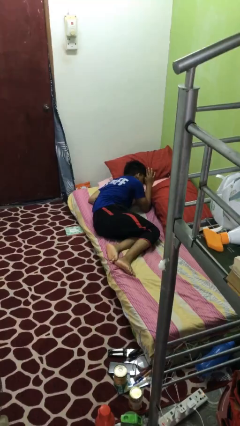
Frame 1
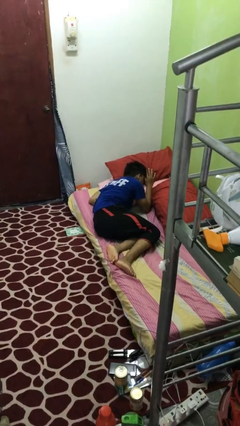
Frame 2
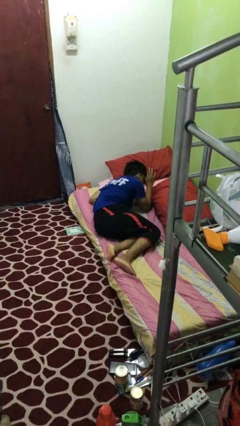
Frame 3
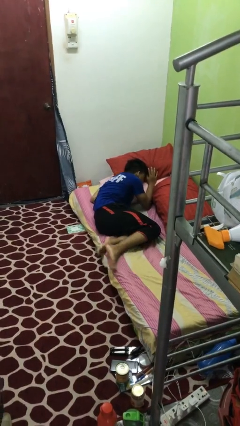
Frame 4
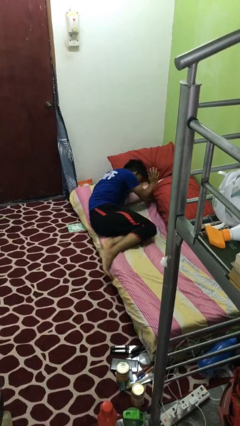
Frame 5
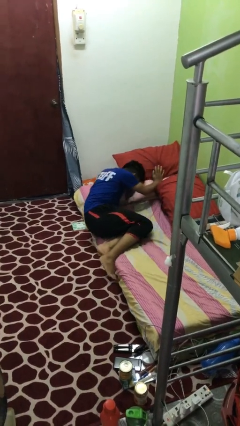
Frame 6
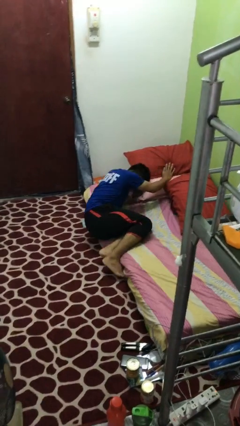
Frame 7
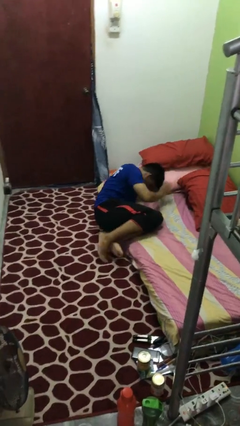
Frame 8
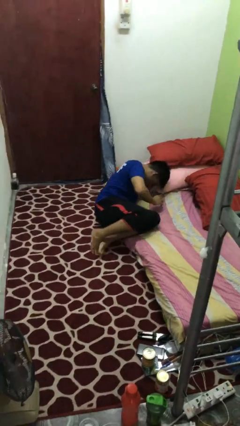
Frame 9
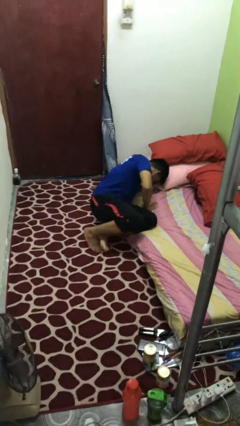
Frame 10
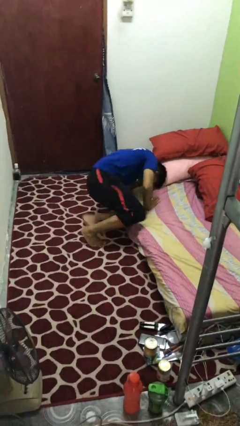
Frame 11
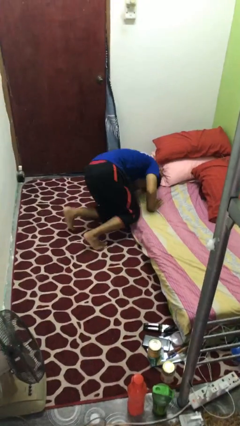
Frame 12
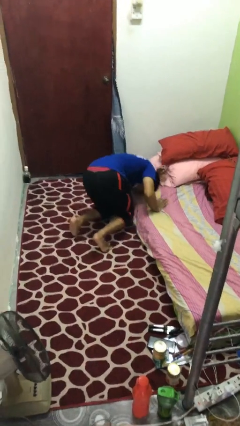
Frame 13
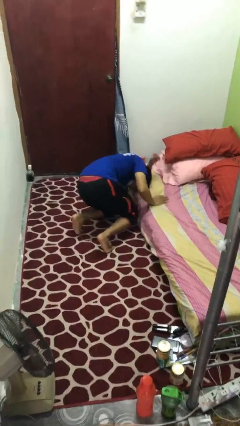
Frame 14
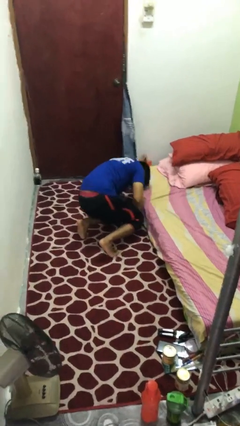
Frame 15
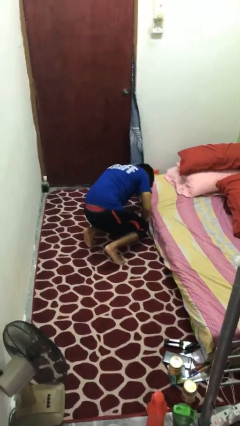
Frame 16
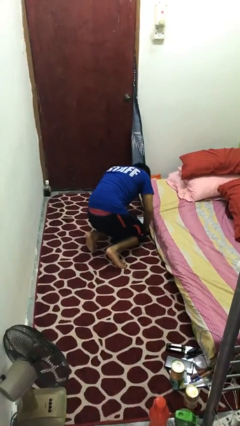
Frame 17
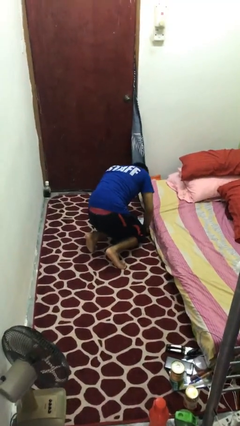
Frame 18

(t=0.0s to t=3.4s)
person falls from bed

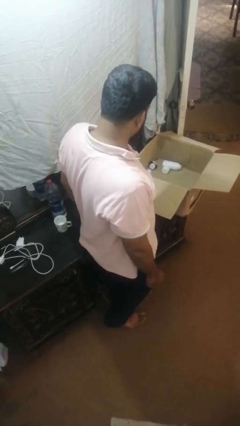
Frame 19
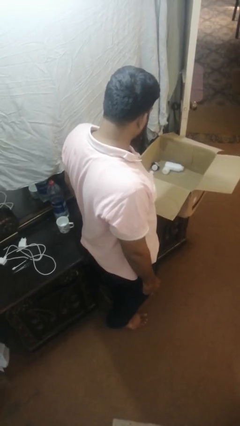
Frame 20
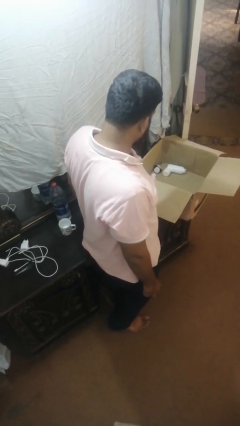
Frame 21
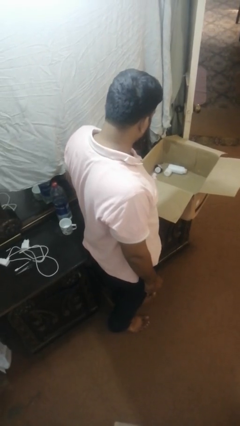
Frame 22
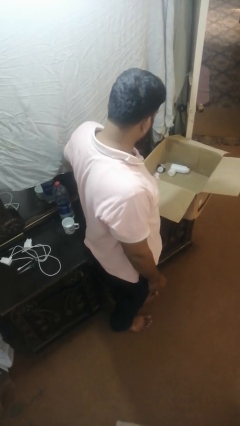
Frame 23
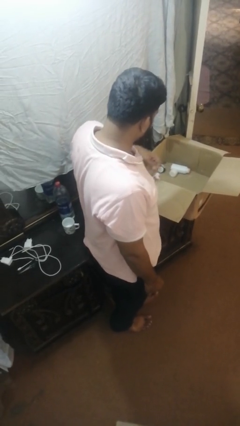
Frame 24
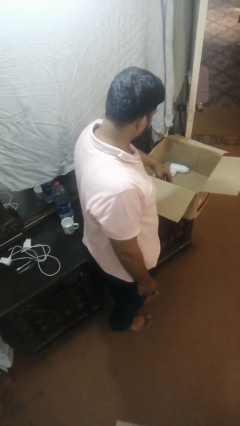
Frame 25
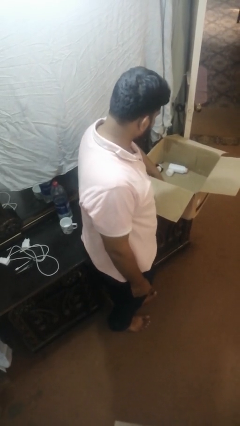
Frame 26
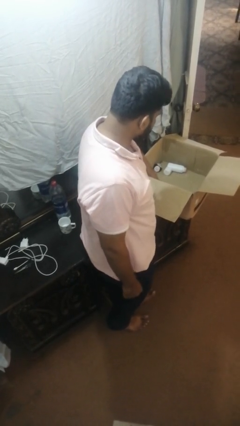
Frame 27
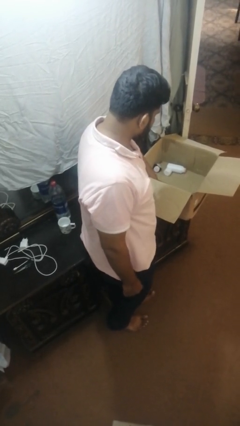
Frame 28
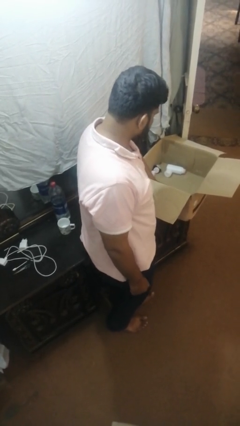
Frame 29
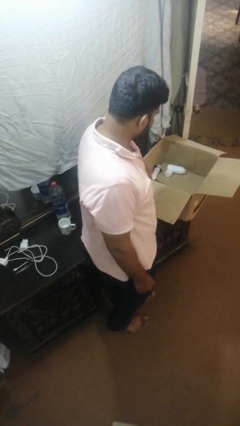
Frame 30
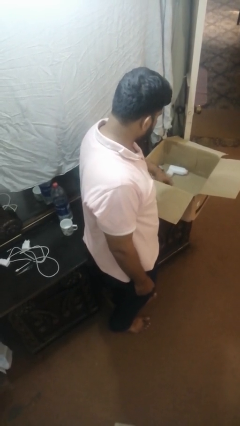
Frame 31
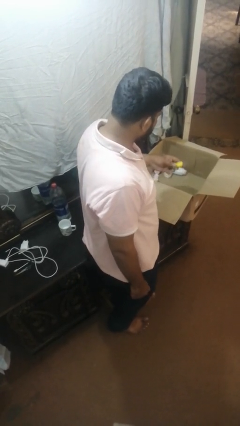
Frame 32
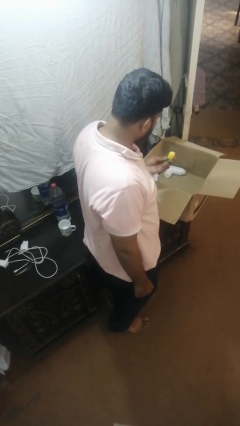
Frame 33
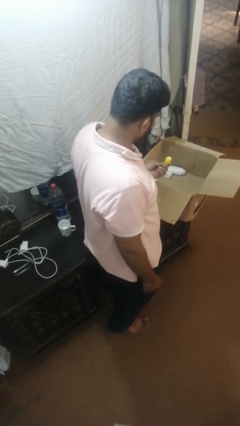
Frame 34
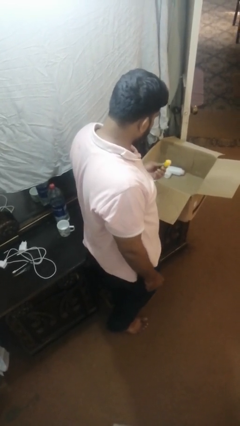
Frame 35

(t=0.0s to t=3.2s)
person takes object from box

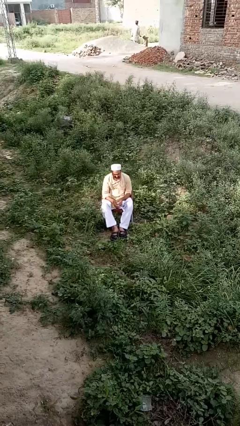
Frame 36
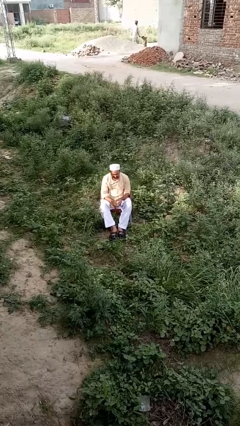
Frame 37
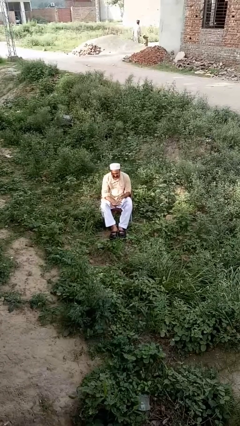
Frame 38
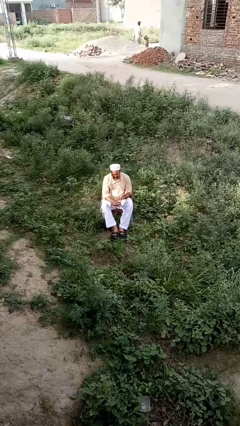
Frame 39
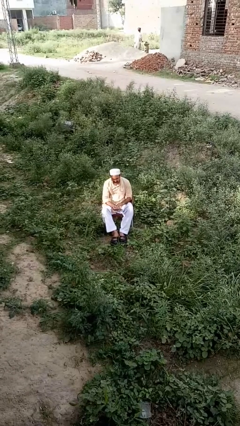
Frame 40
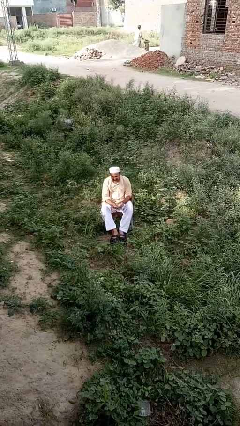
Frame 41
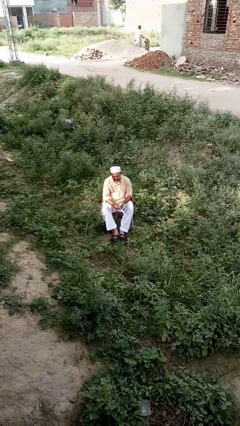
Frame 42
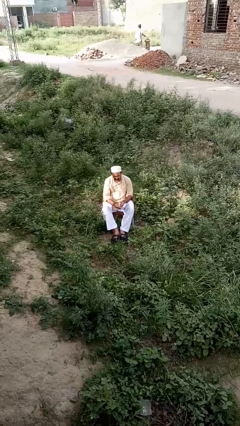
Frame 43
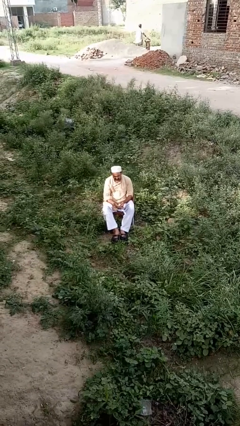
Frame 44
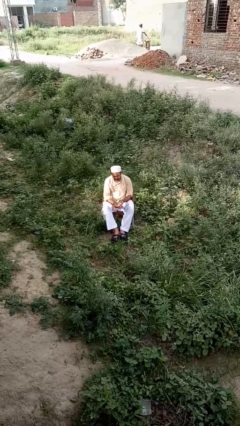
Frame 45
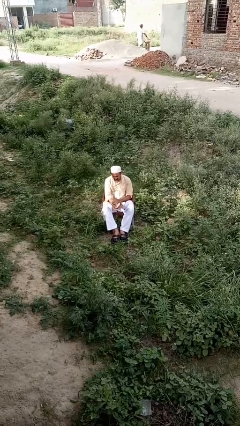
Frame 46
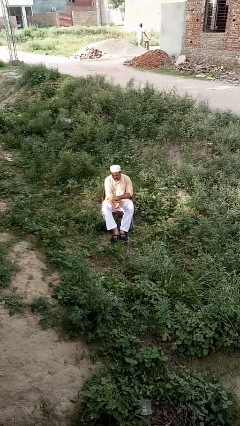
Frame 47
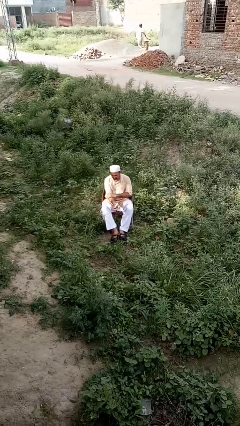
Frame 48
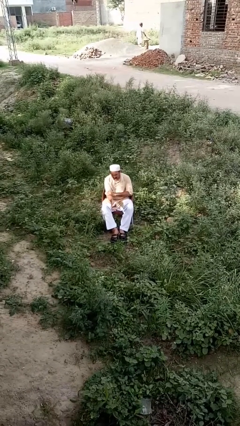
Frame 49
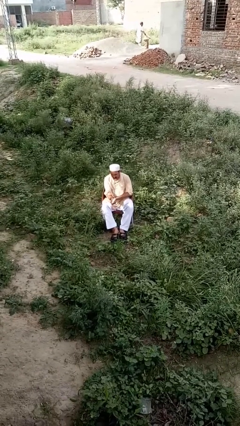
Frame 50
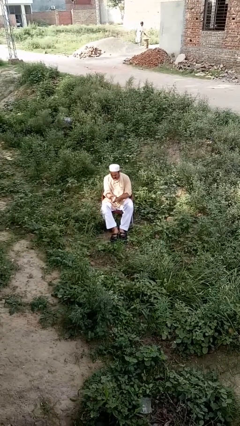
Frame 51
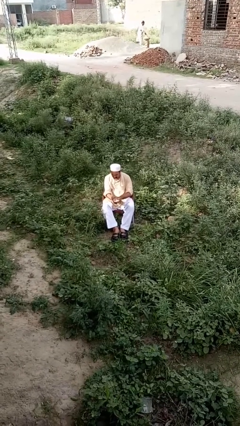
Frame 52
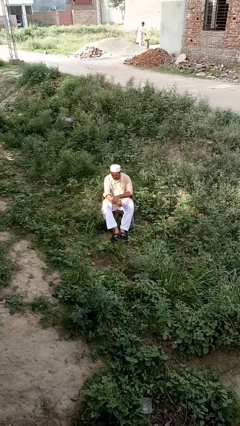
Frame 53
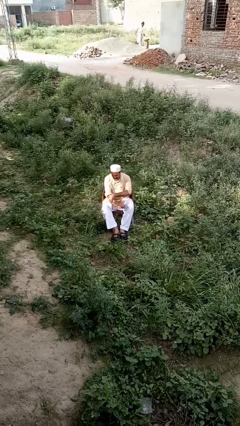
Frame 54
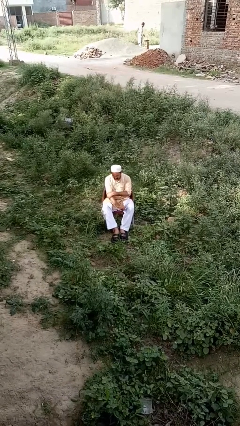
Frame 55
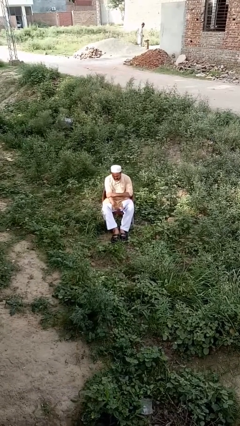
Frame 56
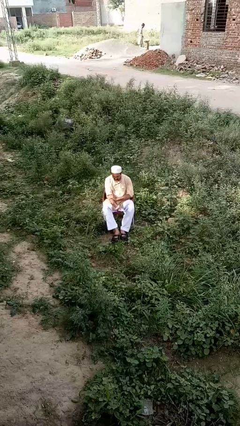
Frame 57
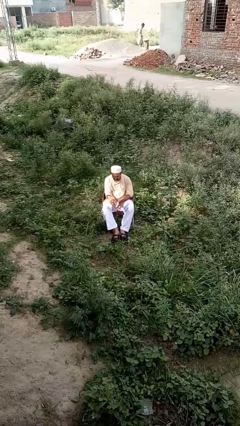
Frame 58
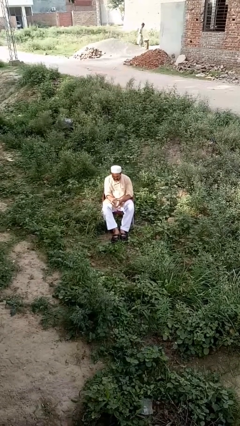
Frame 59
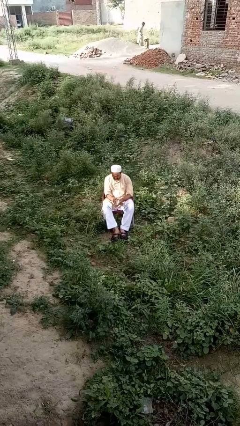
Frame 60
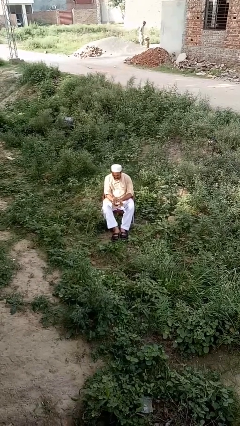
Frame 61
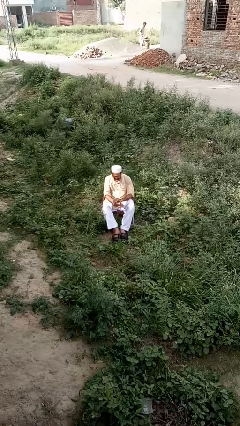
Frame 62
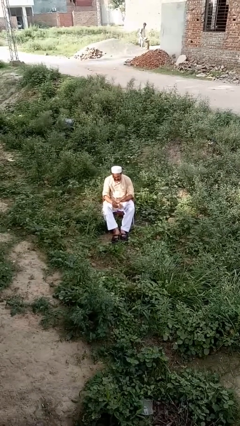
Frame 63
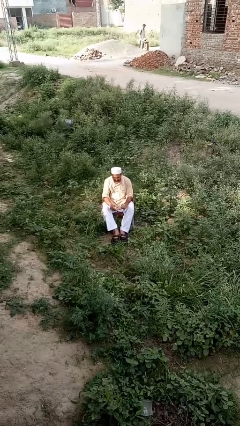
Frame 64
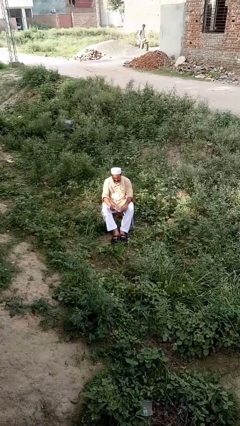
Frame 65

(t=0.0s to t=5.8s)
person applies sunscreen

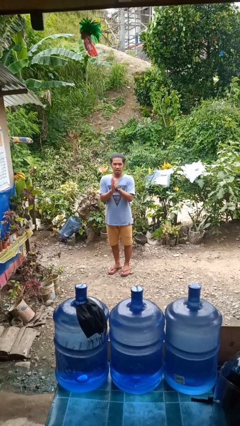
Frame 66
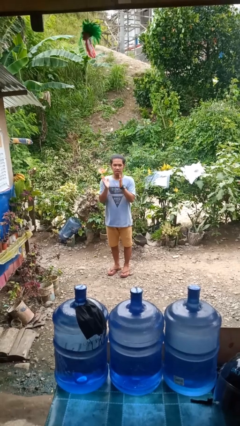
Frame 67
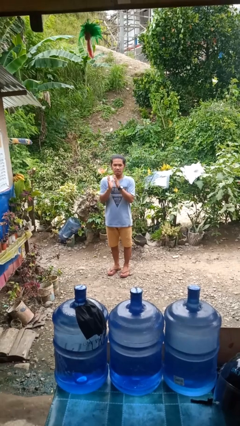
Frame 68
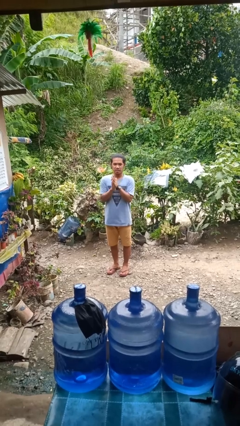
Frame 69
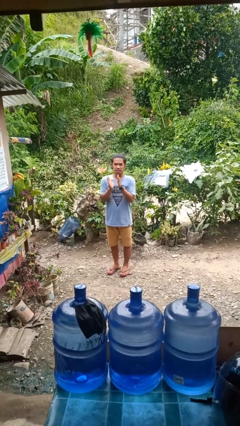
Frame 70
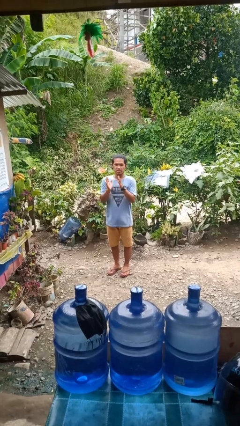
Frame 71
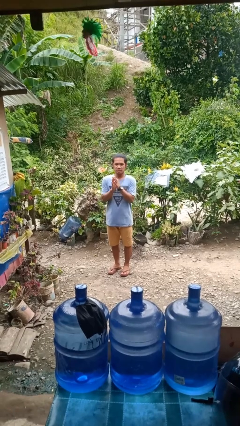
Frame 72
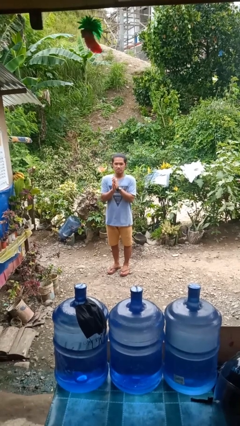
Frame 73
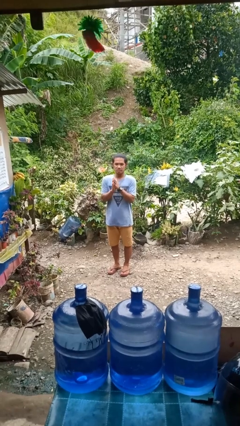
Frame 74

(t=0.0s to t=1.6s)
person claps hands

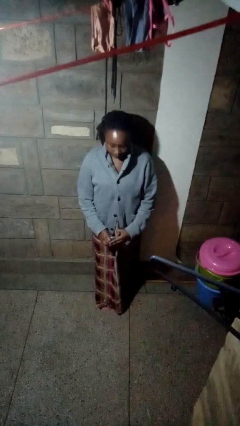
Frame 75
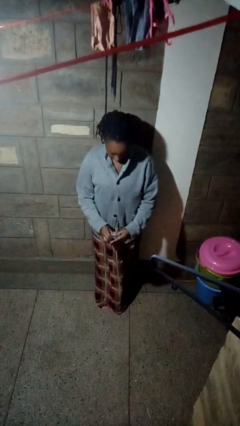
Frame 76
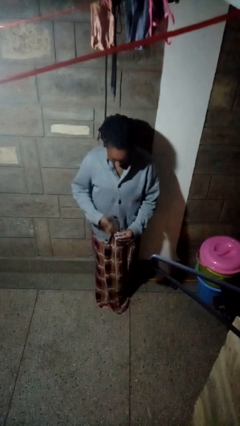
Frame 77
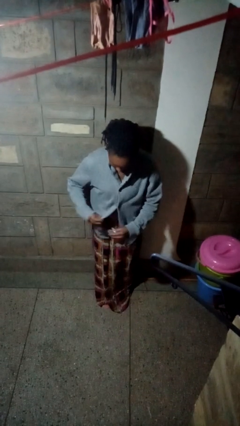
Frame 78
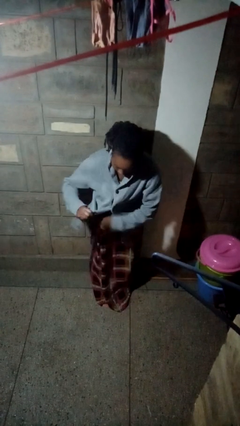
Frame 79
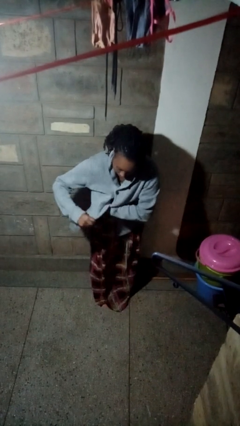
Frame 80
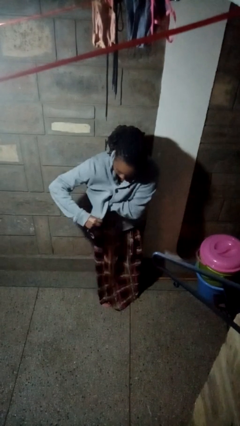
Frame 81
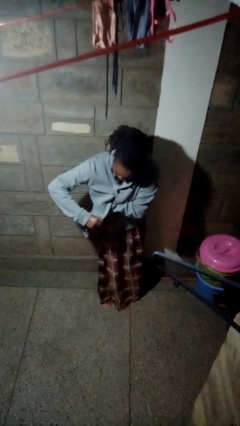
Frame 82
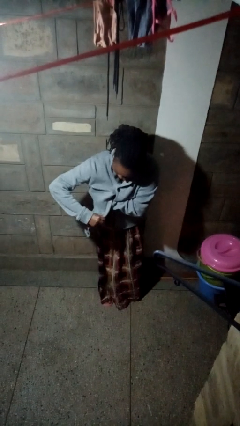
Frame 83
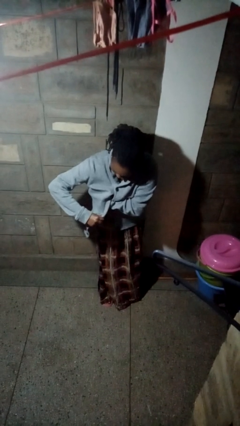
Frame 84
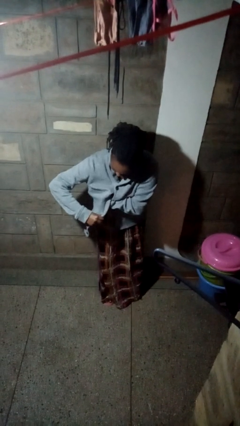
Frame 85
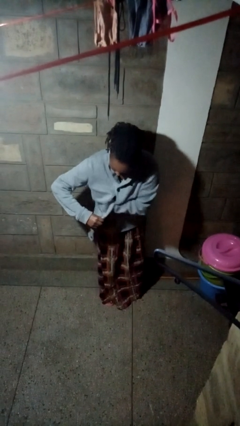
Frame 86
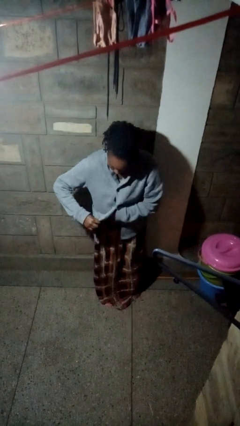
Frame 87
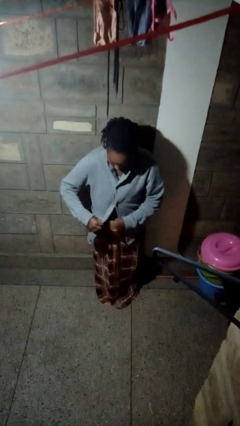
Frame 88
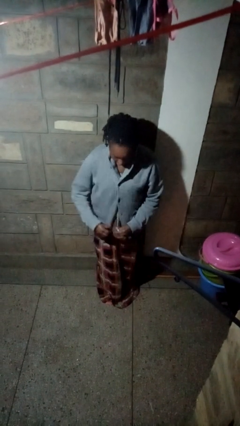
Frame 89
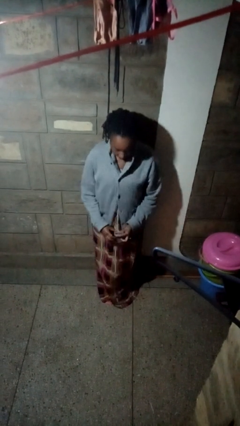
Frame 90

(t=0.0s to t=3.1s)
person applies deodorant

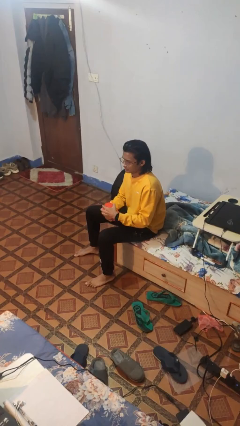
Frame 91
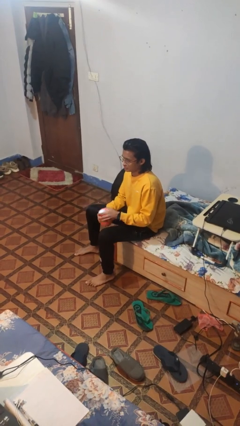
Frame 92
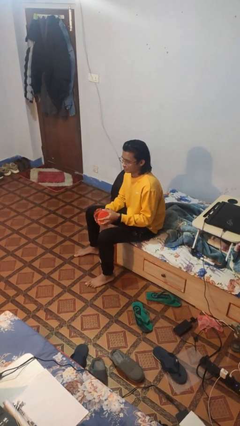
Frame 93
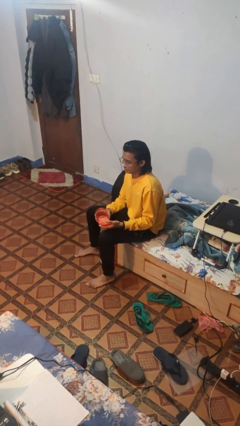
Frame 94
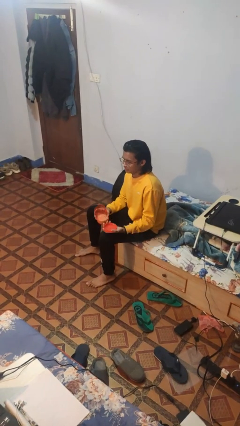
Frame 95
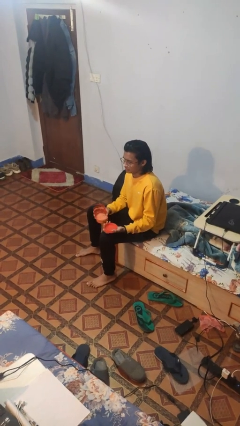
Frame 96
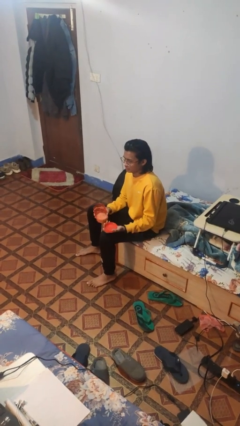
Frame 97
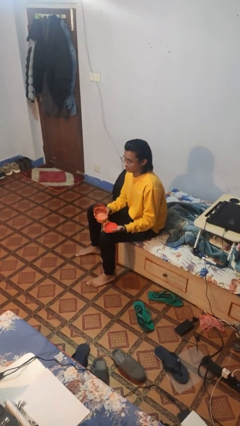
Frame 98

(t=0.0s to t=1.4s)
person opens jar
